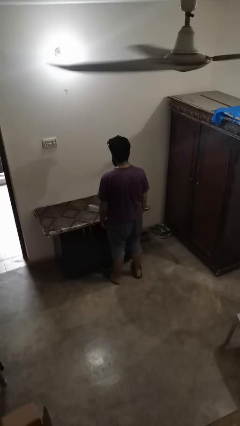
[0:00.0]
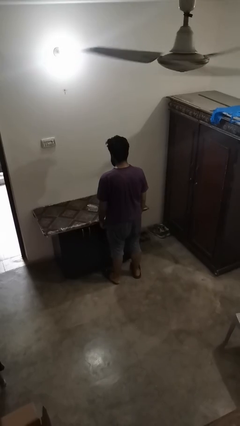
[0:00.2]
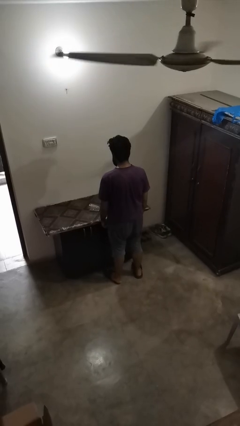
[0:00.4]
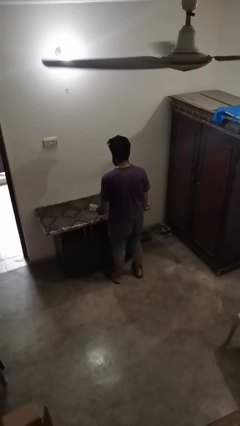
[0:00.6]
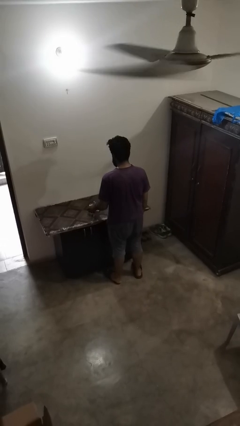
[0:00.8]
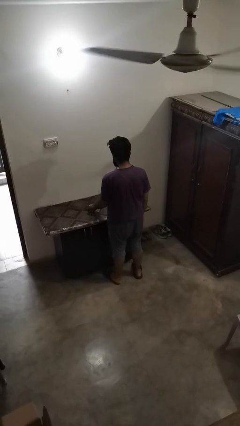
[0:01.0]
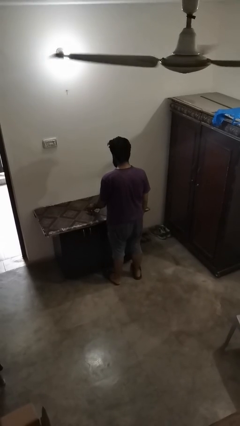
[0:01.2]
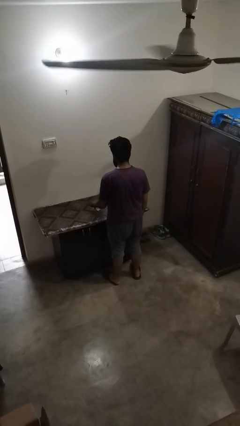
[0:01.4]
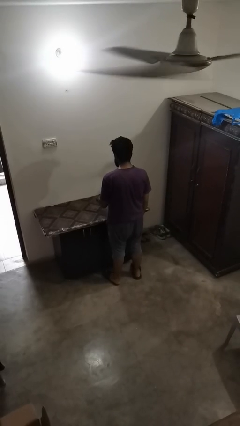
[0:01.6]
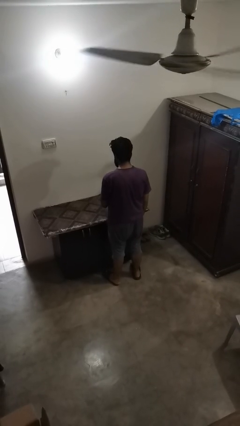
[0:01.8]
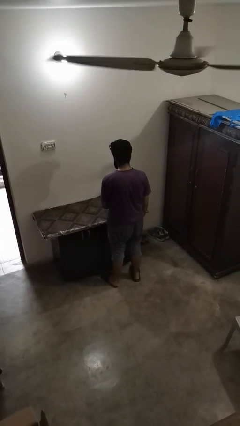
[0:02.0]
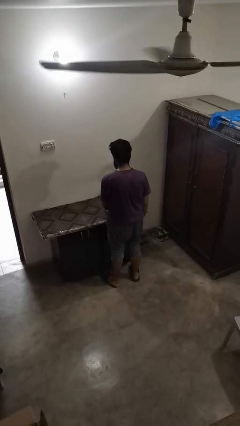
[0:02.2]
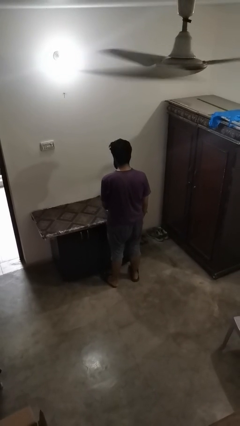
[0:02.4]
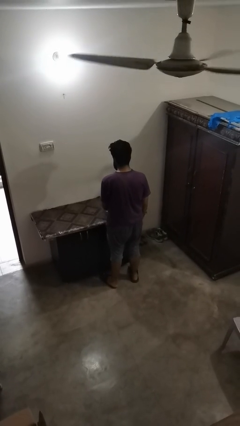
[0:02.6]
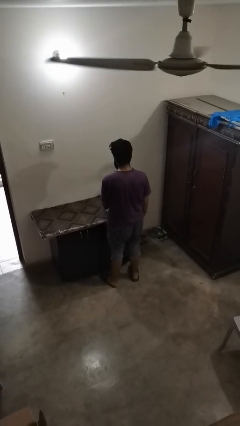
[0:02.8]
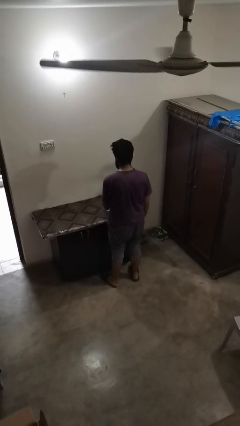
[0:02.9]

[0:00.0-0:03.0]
person sets upright glass

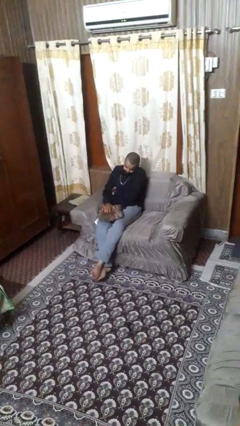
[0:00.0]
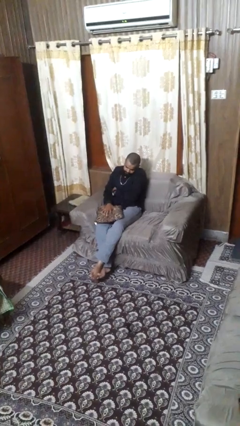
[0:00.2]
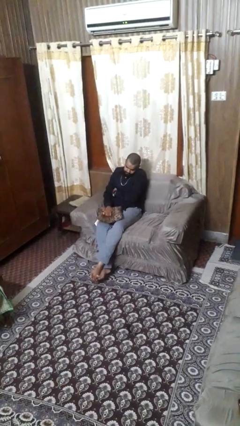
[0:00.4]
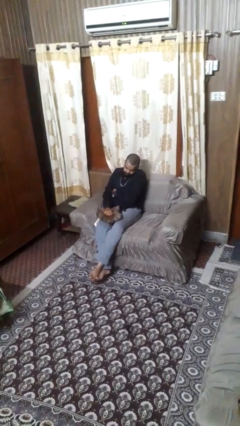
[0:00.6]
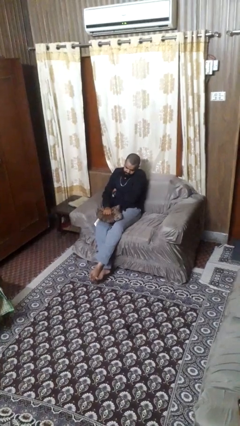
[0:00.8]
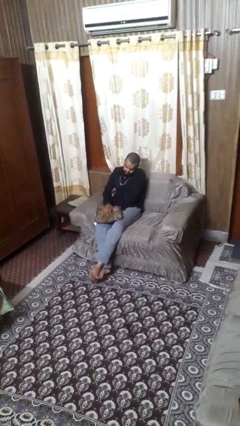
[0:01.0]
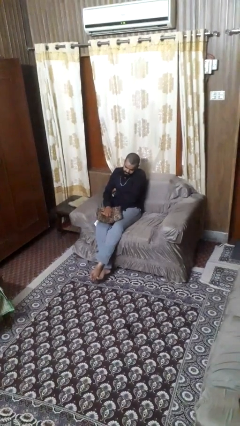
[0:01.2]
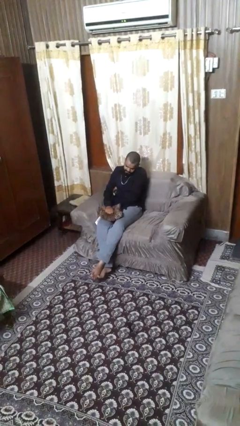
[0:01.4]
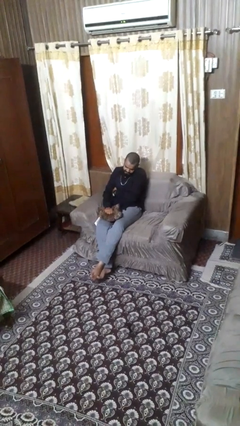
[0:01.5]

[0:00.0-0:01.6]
person squeezes object

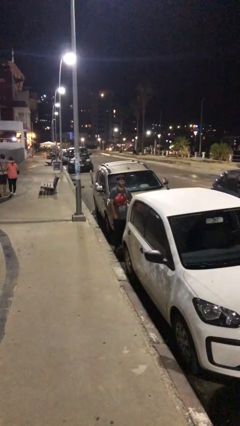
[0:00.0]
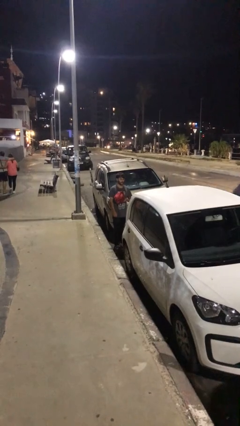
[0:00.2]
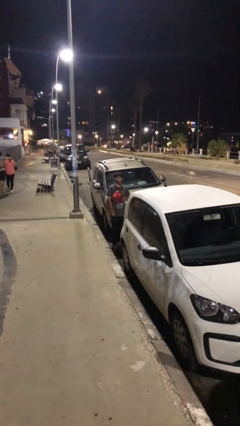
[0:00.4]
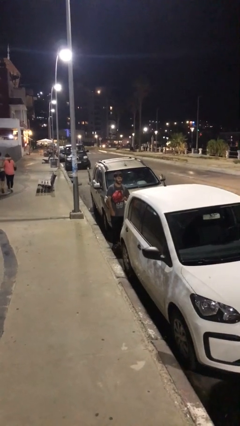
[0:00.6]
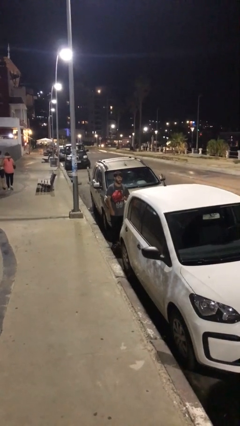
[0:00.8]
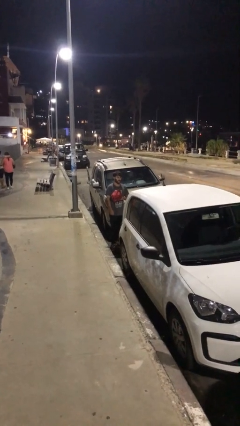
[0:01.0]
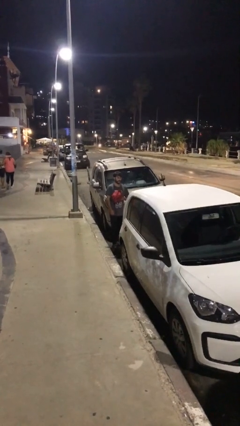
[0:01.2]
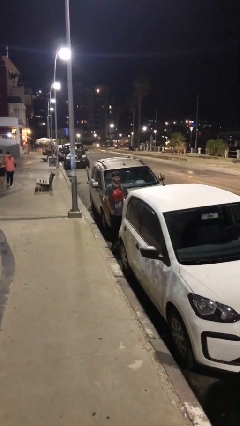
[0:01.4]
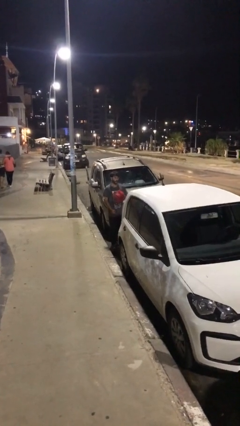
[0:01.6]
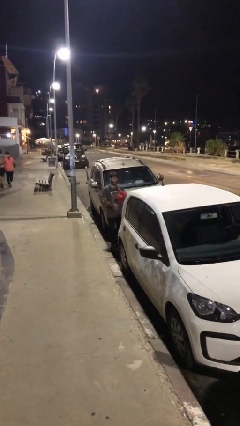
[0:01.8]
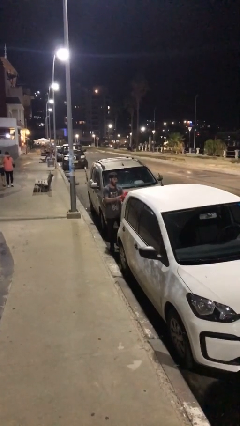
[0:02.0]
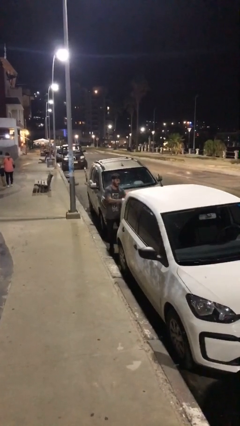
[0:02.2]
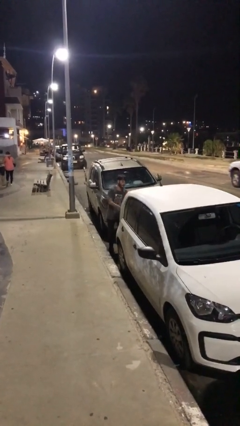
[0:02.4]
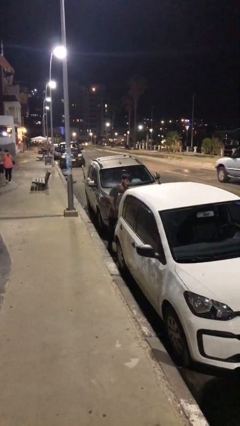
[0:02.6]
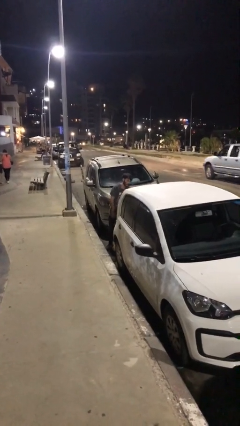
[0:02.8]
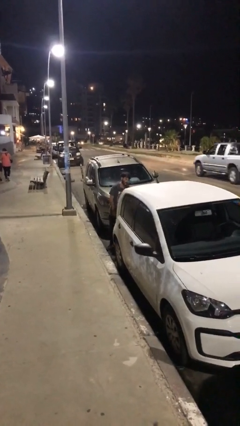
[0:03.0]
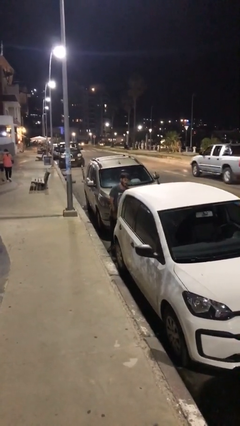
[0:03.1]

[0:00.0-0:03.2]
person loads car

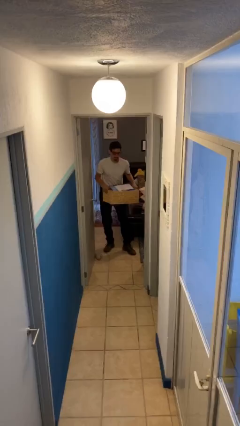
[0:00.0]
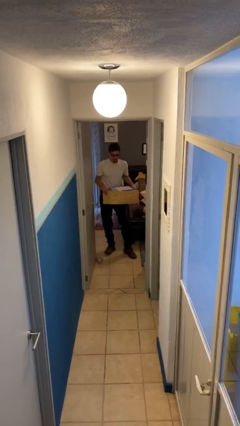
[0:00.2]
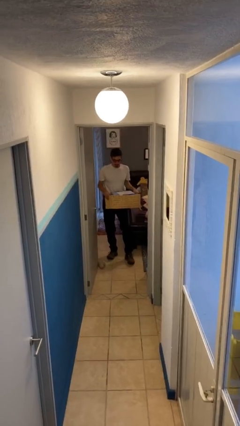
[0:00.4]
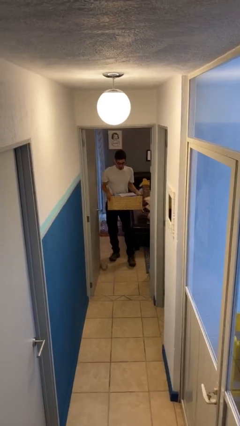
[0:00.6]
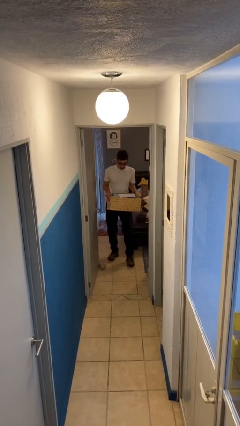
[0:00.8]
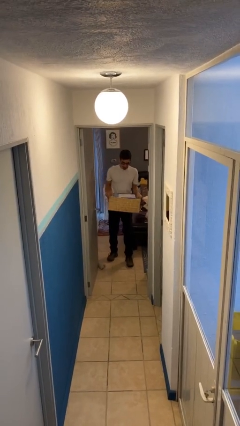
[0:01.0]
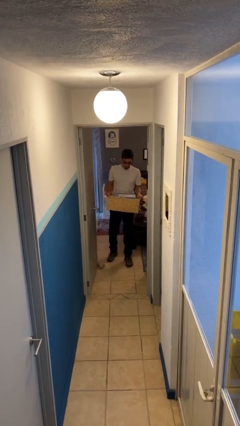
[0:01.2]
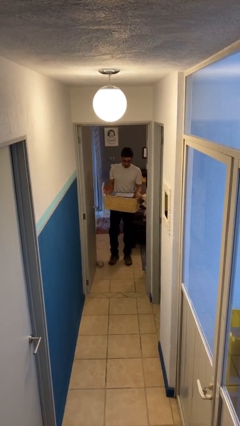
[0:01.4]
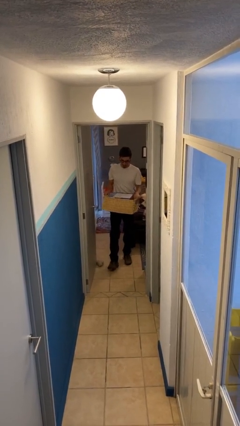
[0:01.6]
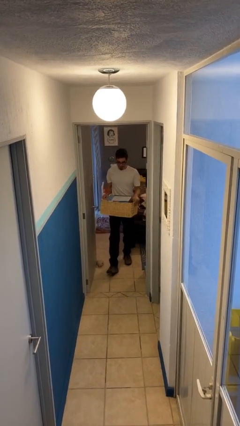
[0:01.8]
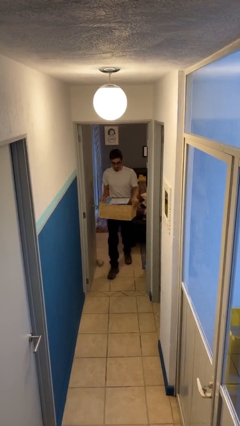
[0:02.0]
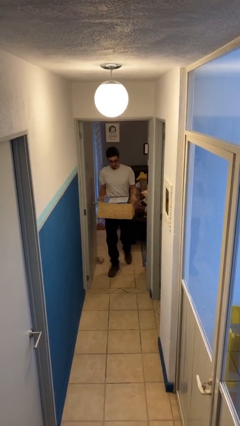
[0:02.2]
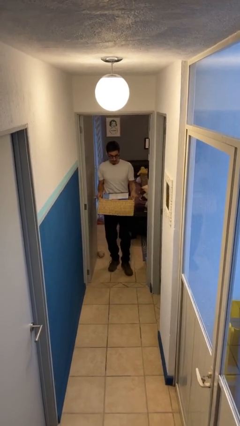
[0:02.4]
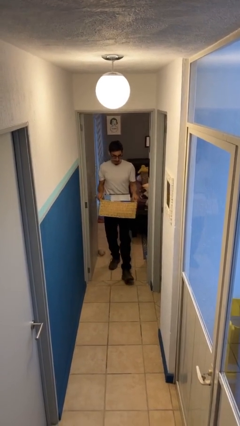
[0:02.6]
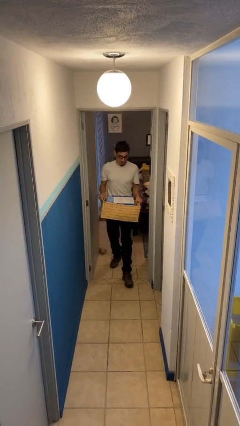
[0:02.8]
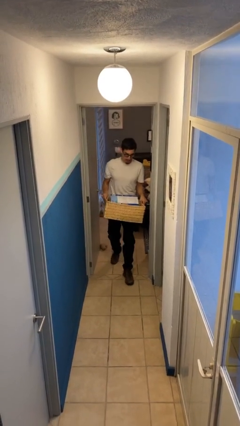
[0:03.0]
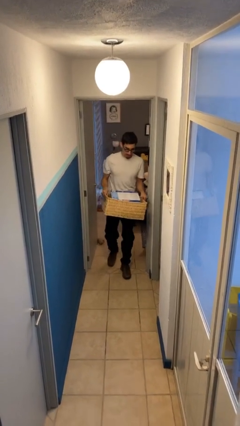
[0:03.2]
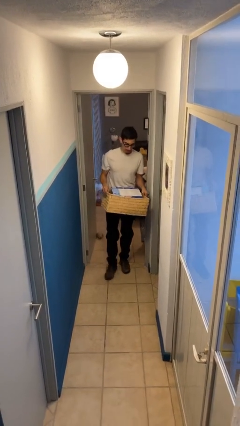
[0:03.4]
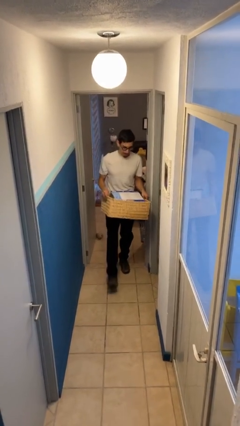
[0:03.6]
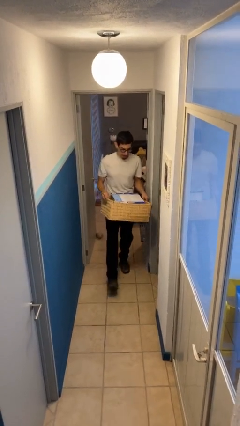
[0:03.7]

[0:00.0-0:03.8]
person carries heavy object

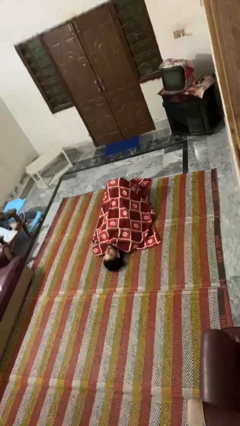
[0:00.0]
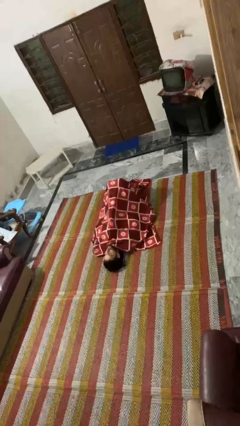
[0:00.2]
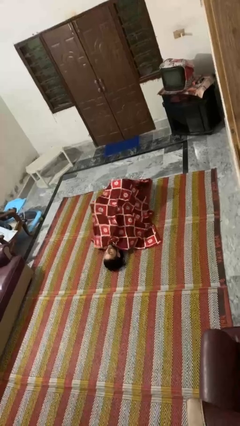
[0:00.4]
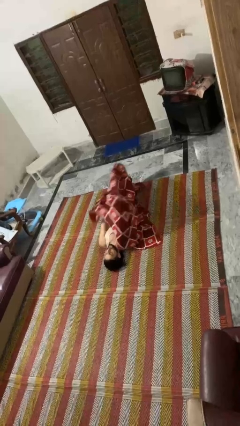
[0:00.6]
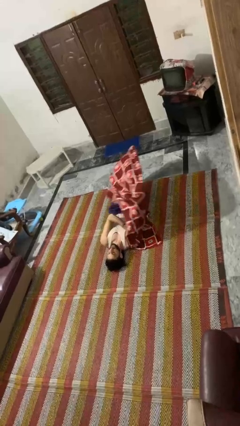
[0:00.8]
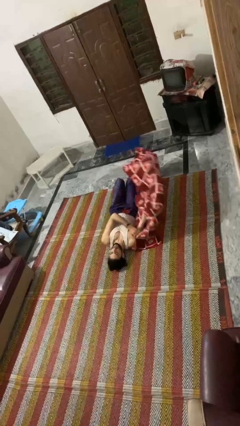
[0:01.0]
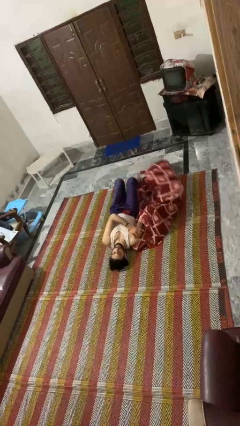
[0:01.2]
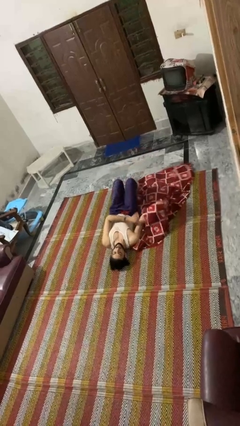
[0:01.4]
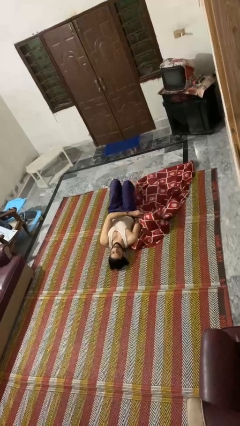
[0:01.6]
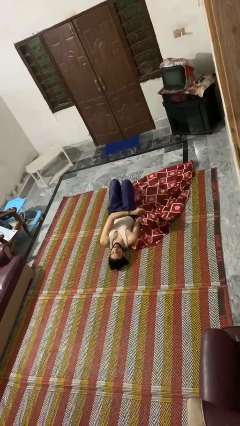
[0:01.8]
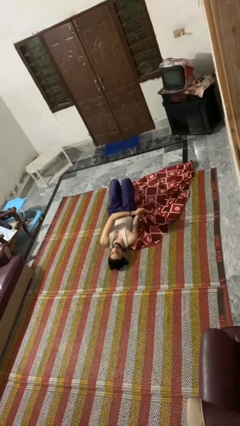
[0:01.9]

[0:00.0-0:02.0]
person uncovers with blanket

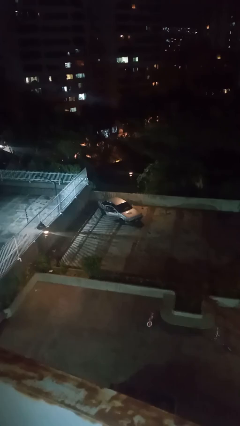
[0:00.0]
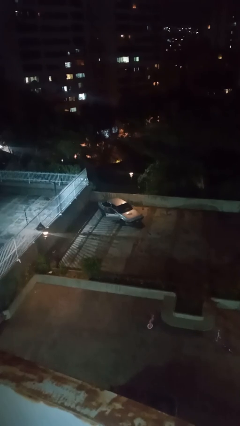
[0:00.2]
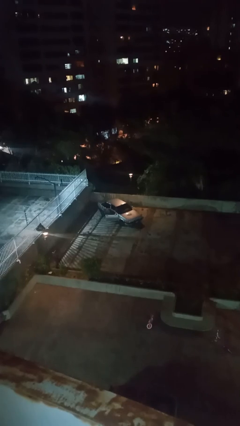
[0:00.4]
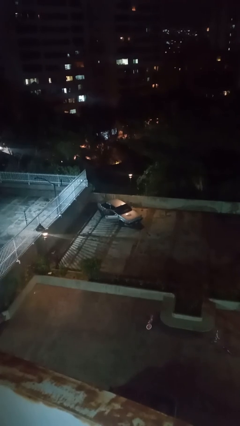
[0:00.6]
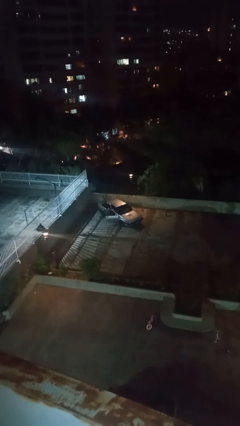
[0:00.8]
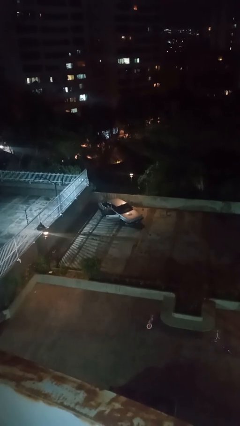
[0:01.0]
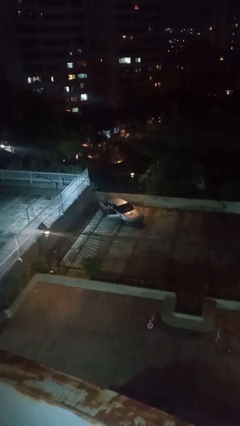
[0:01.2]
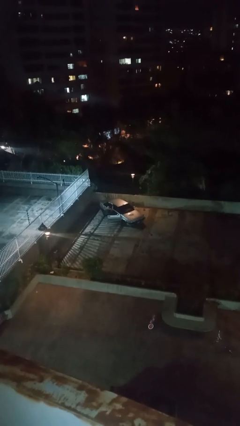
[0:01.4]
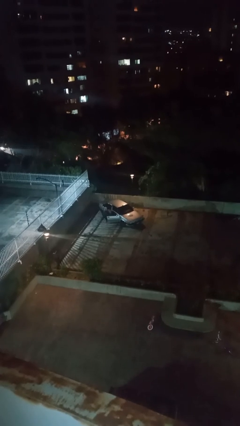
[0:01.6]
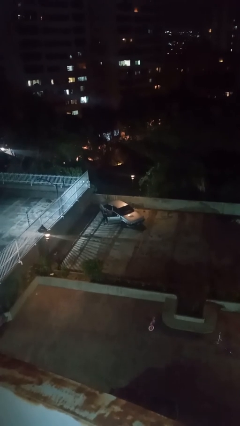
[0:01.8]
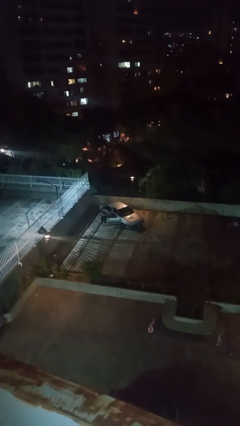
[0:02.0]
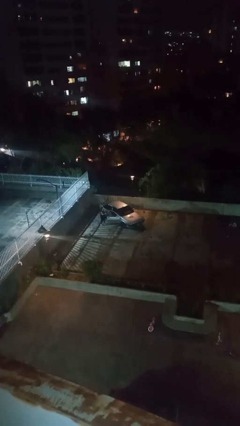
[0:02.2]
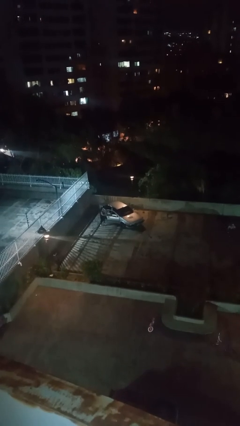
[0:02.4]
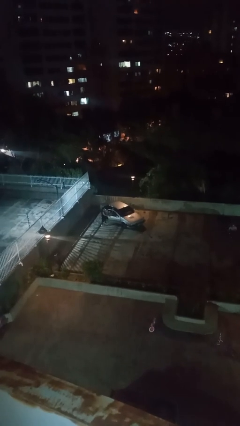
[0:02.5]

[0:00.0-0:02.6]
car drops off person

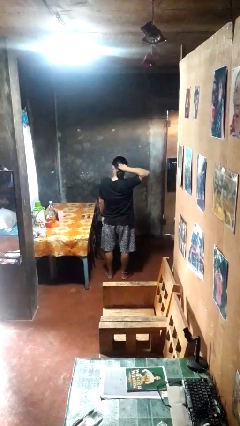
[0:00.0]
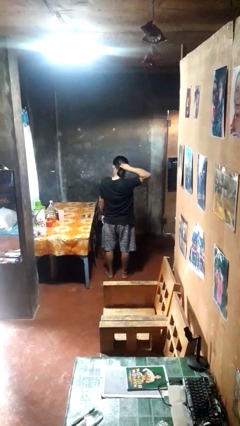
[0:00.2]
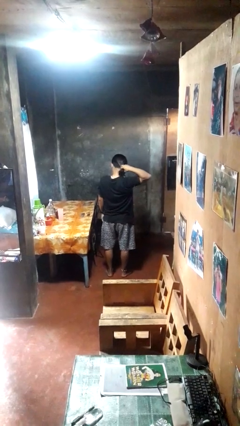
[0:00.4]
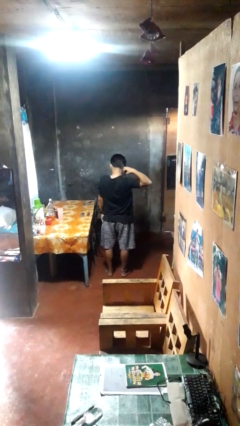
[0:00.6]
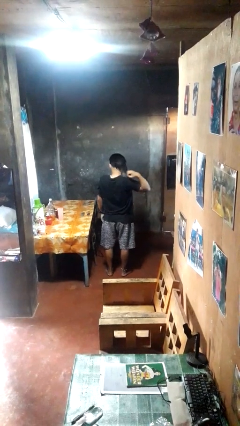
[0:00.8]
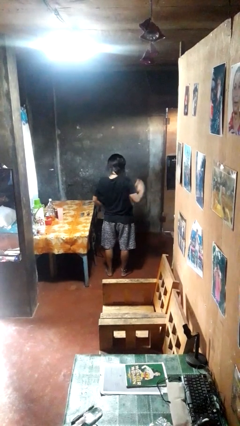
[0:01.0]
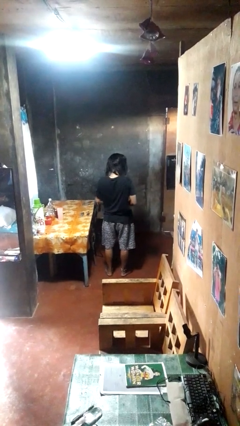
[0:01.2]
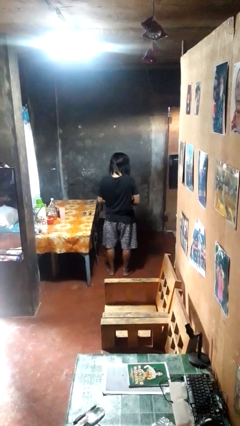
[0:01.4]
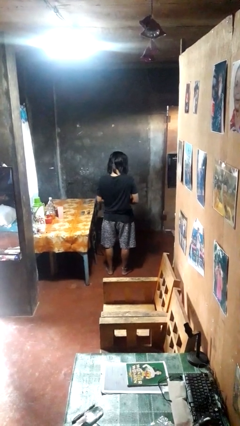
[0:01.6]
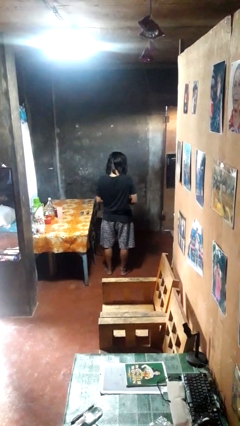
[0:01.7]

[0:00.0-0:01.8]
person takes off hairtie
